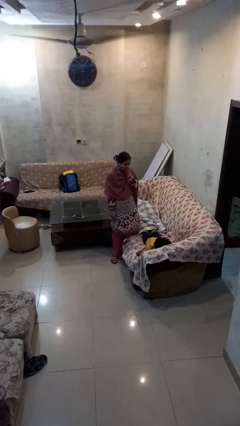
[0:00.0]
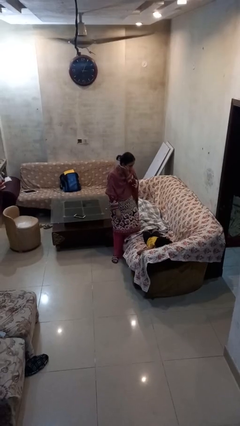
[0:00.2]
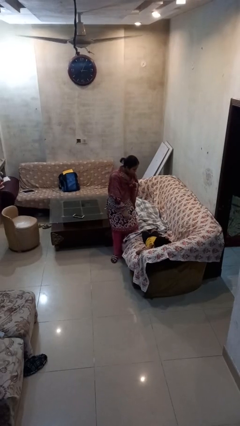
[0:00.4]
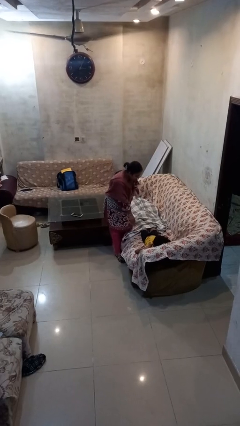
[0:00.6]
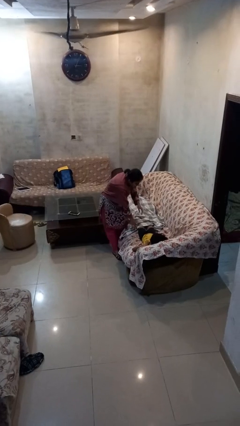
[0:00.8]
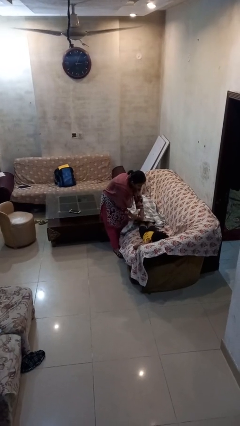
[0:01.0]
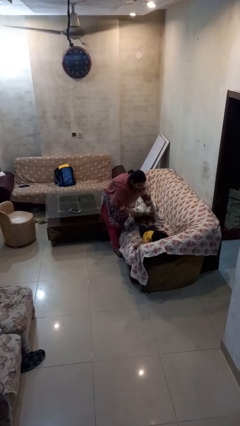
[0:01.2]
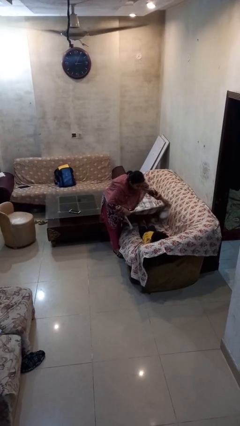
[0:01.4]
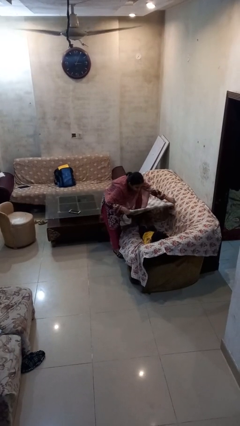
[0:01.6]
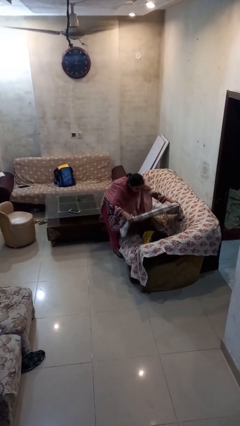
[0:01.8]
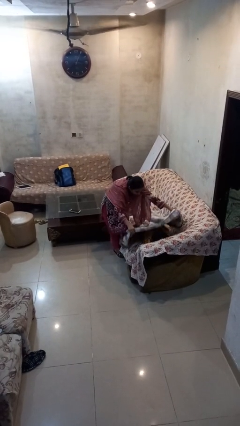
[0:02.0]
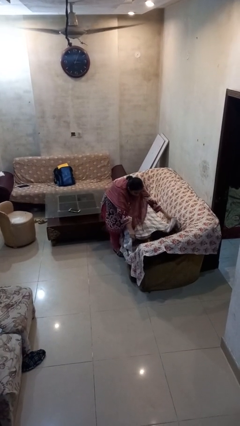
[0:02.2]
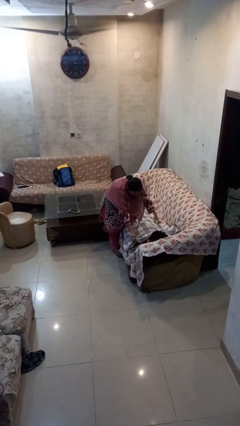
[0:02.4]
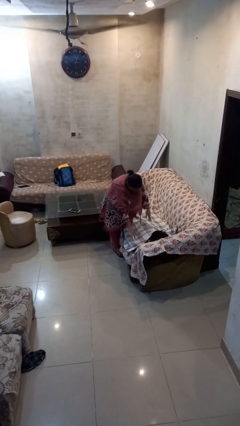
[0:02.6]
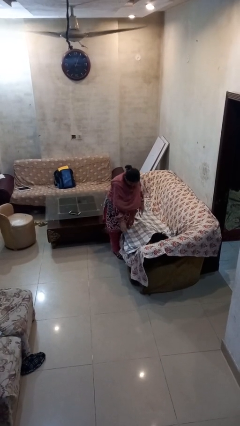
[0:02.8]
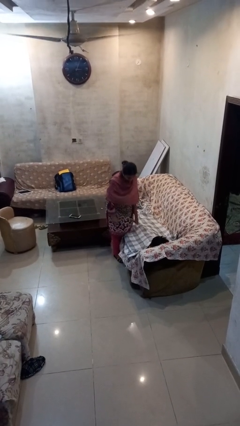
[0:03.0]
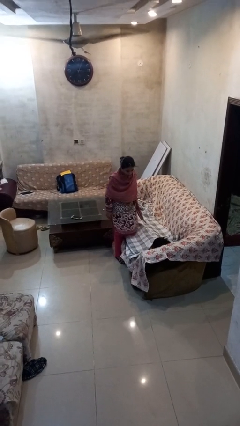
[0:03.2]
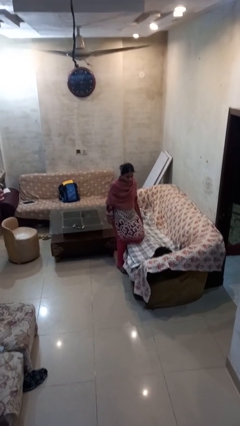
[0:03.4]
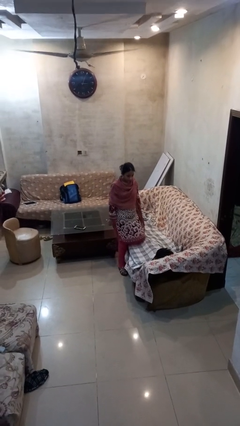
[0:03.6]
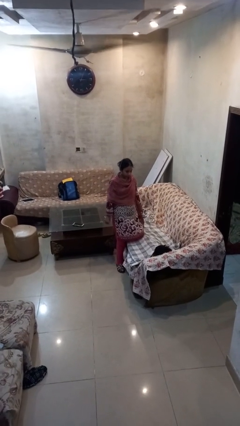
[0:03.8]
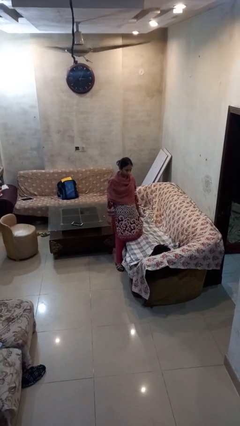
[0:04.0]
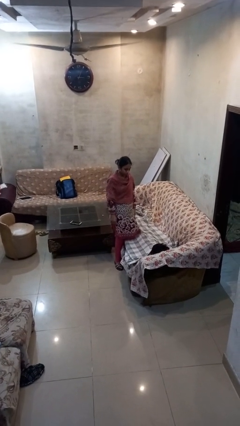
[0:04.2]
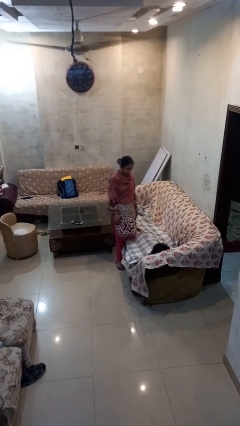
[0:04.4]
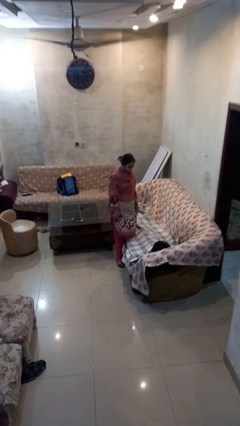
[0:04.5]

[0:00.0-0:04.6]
person covers friend with blanket

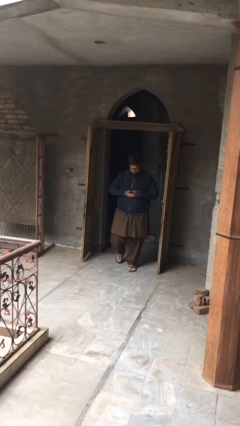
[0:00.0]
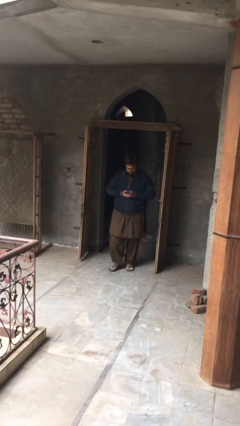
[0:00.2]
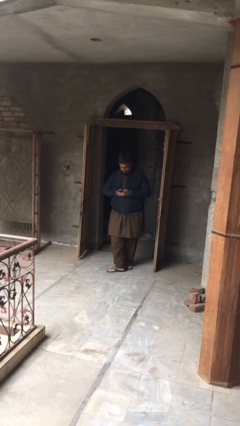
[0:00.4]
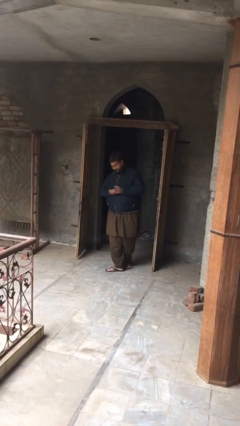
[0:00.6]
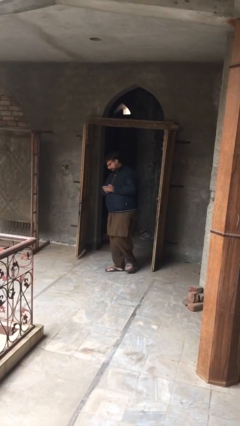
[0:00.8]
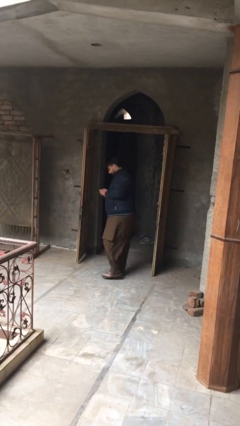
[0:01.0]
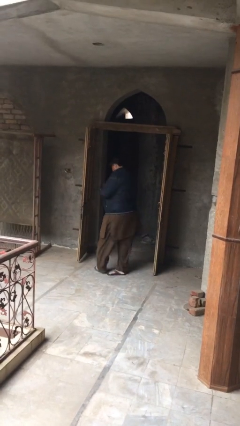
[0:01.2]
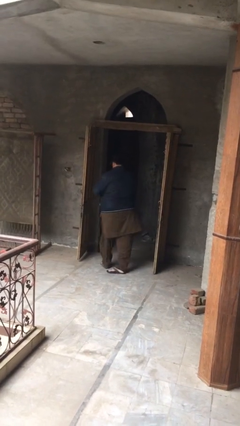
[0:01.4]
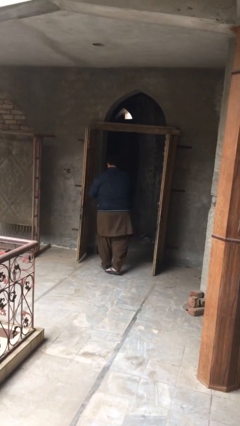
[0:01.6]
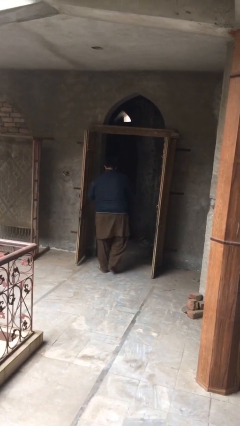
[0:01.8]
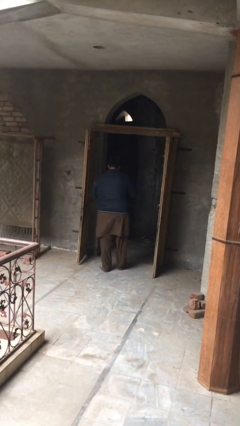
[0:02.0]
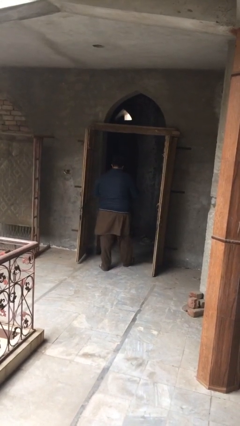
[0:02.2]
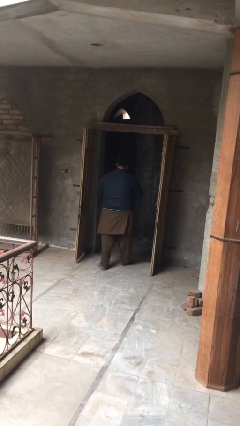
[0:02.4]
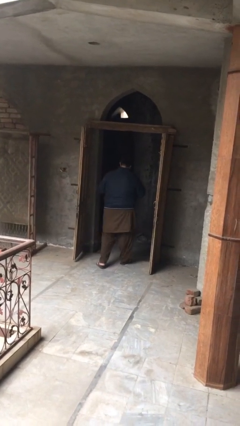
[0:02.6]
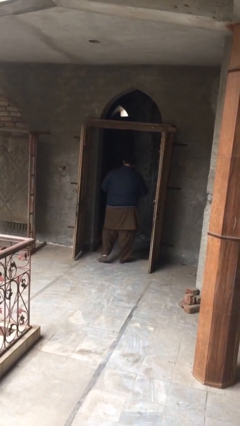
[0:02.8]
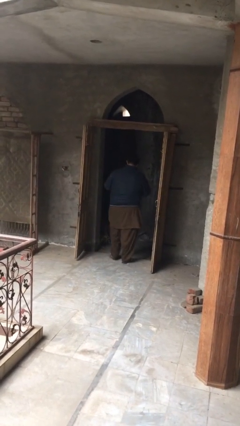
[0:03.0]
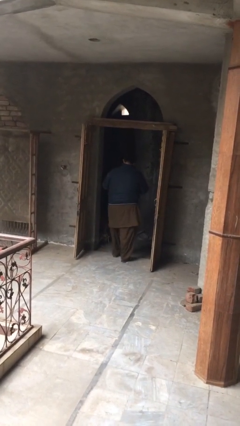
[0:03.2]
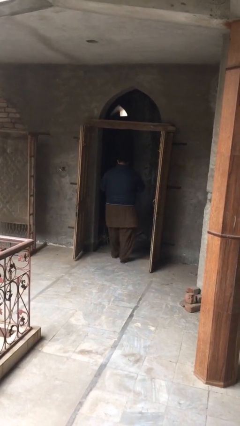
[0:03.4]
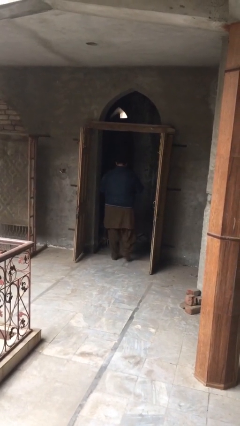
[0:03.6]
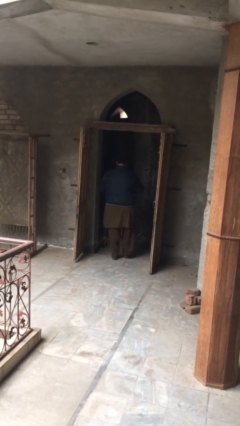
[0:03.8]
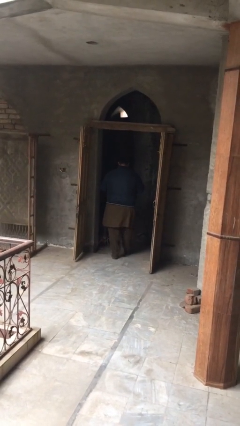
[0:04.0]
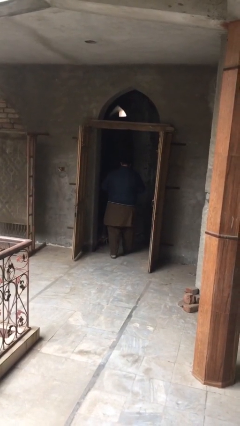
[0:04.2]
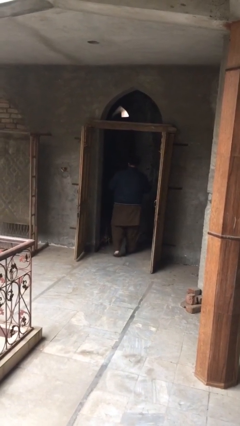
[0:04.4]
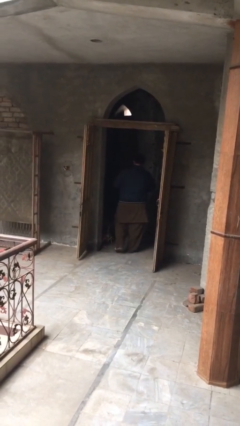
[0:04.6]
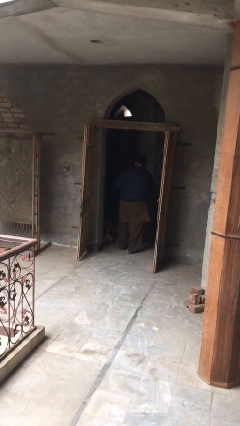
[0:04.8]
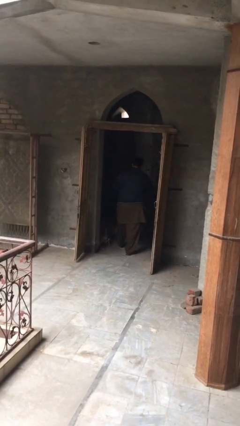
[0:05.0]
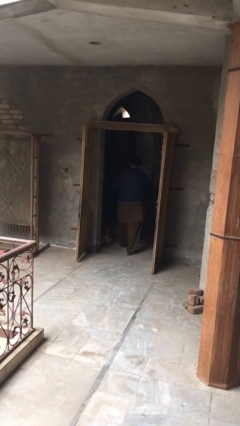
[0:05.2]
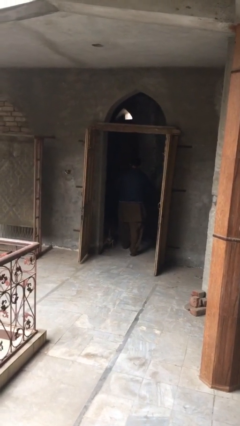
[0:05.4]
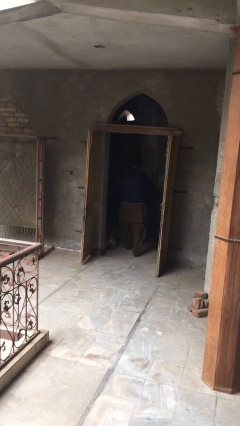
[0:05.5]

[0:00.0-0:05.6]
person exits scene through structure

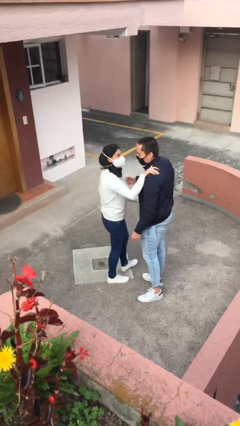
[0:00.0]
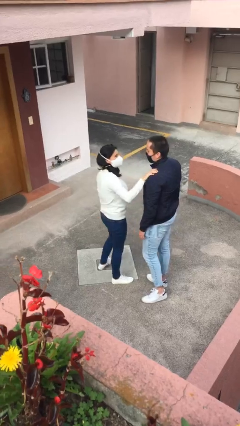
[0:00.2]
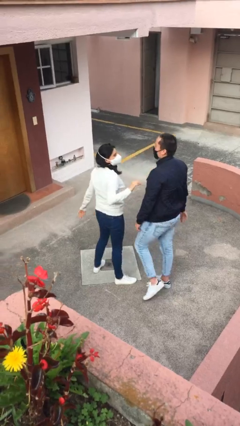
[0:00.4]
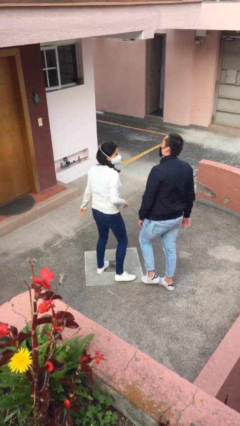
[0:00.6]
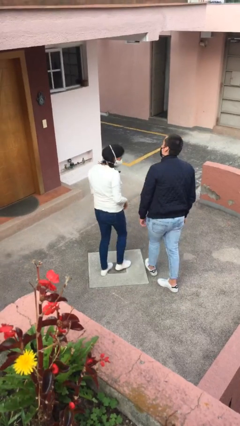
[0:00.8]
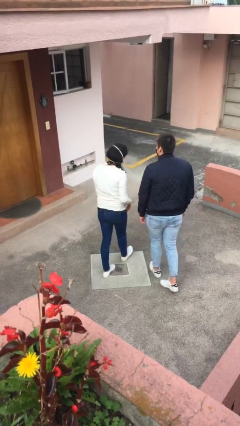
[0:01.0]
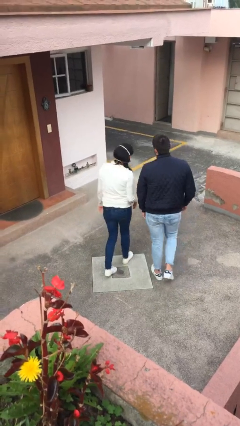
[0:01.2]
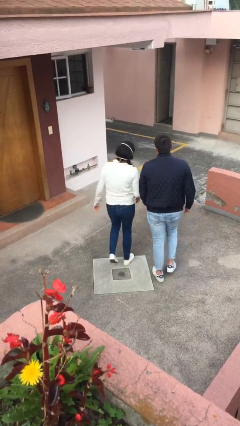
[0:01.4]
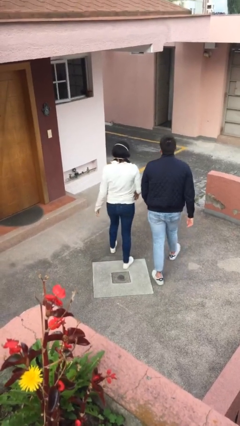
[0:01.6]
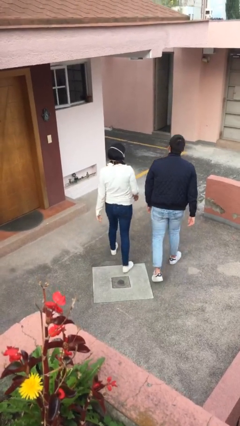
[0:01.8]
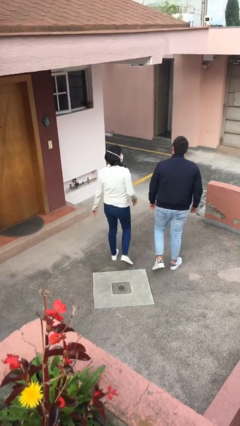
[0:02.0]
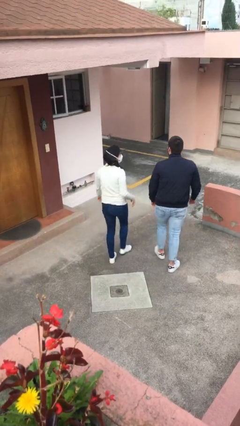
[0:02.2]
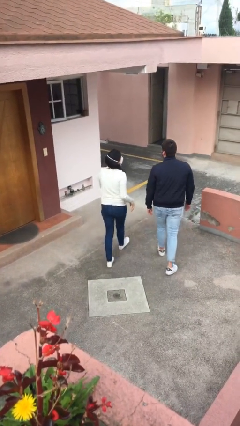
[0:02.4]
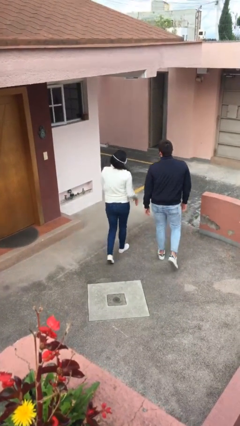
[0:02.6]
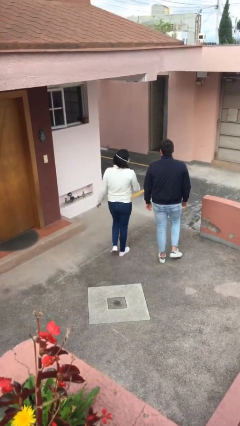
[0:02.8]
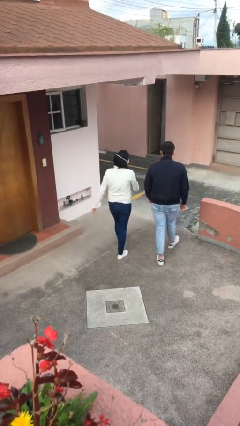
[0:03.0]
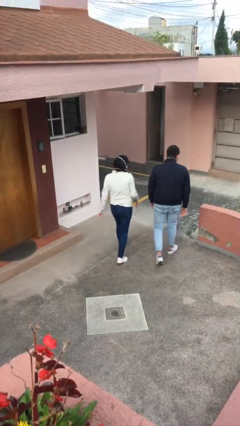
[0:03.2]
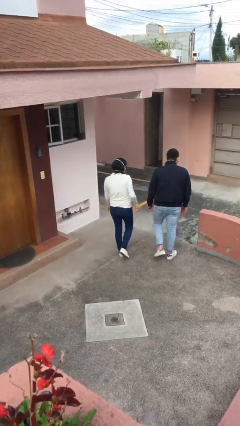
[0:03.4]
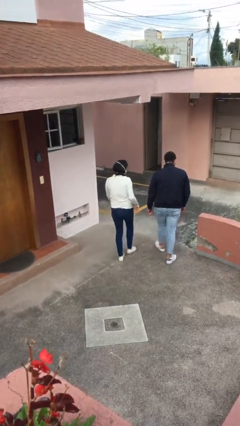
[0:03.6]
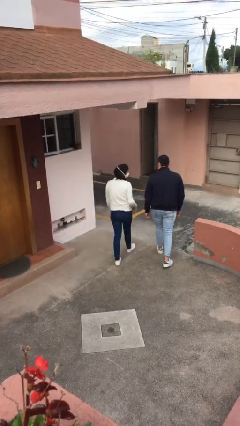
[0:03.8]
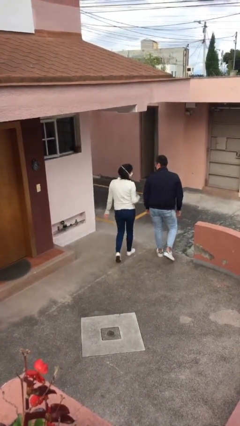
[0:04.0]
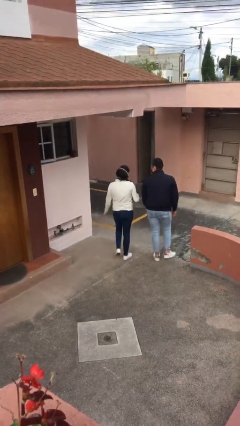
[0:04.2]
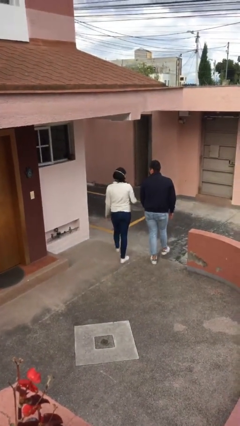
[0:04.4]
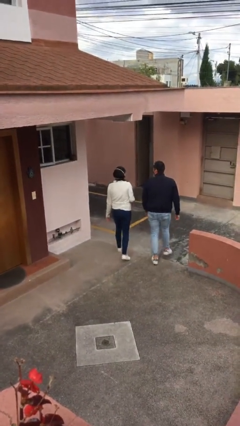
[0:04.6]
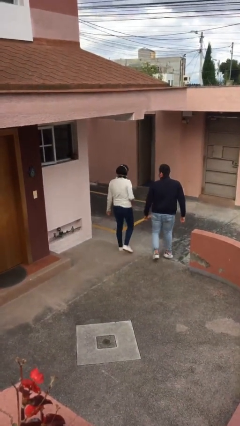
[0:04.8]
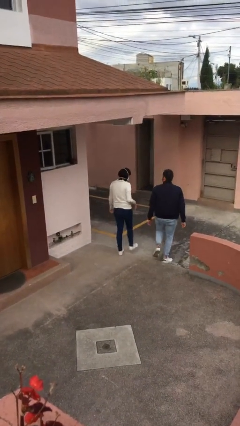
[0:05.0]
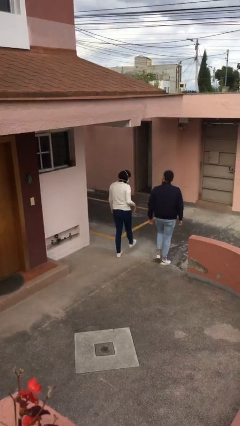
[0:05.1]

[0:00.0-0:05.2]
person talks to person

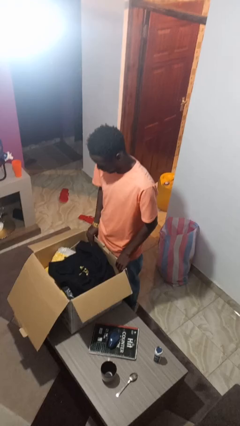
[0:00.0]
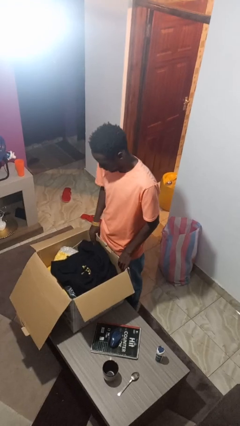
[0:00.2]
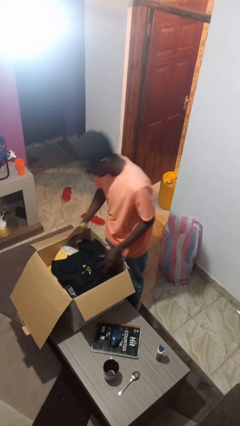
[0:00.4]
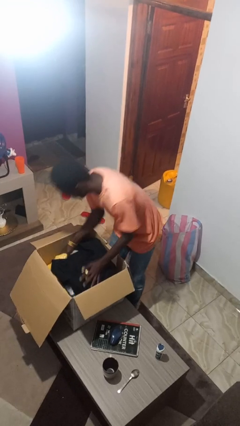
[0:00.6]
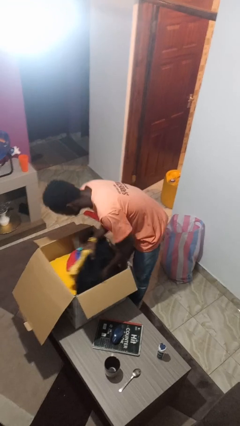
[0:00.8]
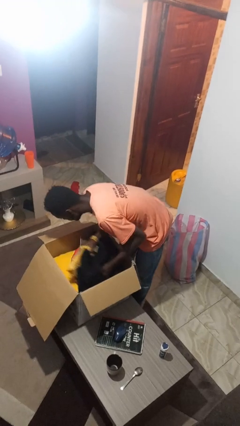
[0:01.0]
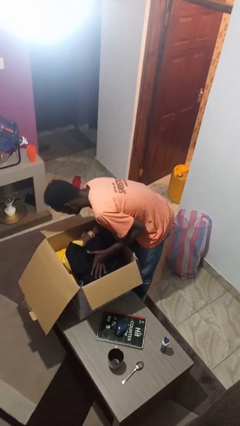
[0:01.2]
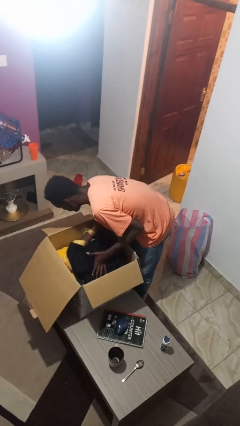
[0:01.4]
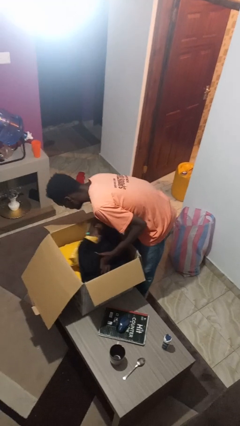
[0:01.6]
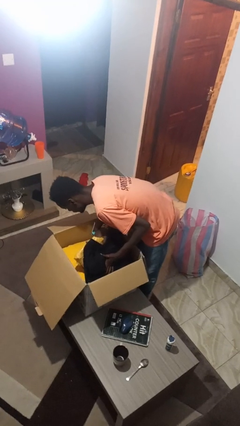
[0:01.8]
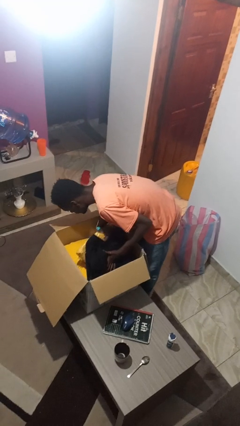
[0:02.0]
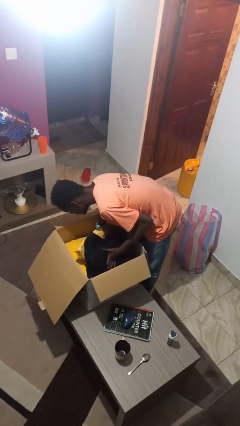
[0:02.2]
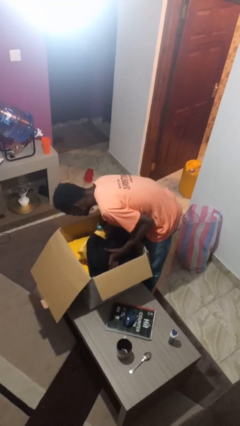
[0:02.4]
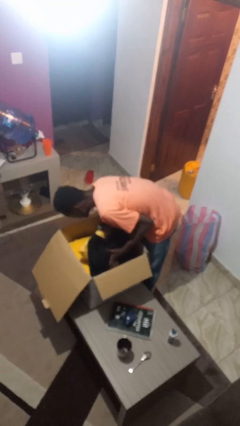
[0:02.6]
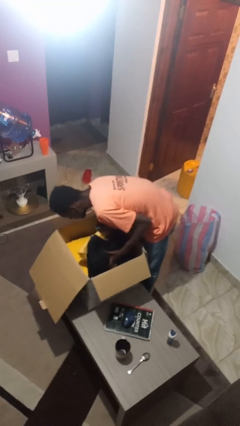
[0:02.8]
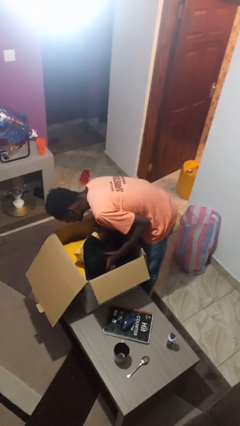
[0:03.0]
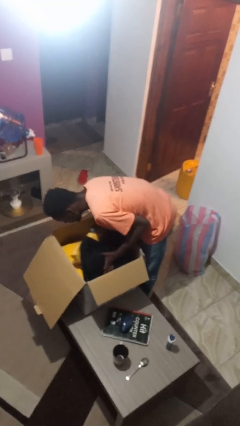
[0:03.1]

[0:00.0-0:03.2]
person searches in box
